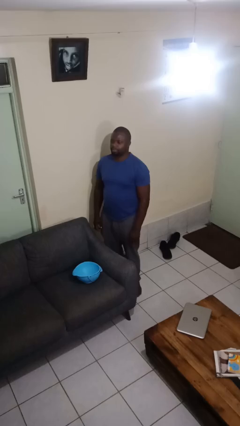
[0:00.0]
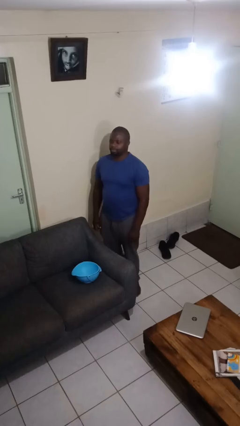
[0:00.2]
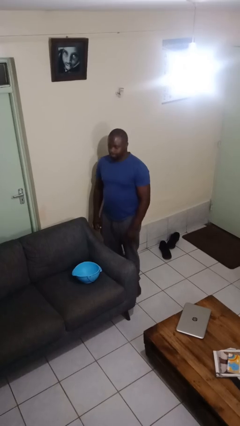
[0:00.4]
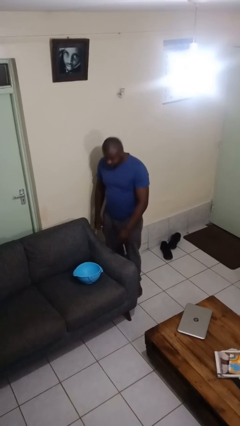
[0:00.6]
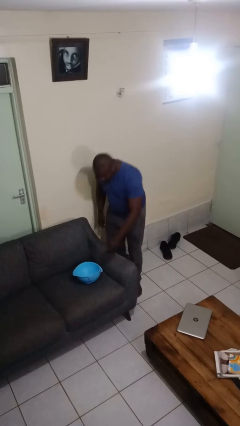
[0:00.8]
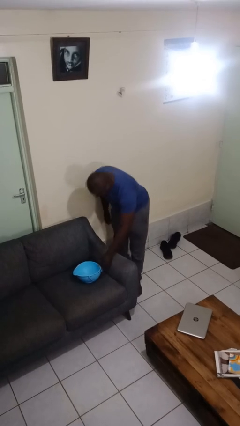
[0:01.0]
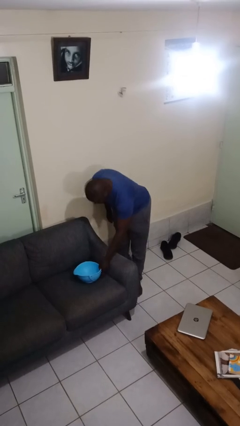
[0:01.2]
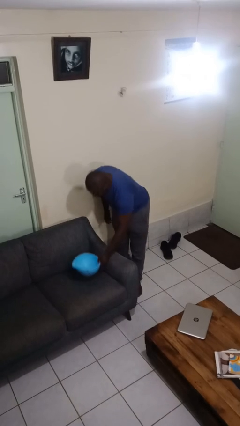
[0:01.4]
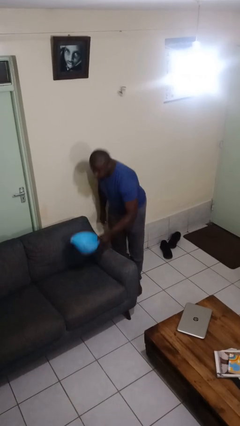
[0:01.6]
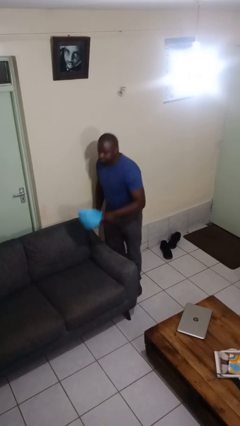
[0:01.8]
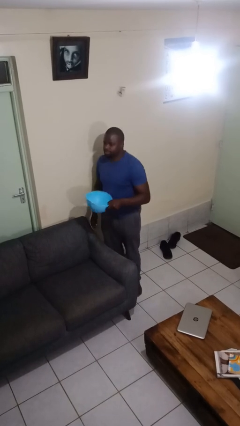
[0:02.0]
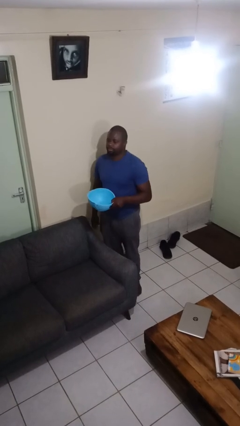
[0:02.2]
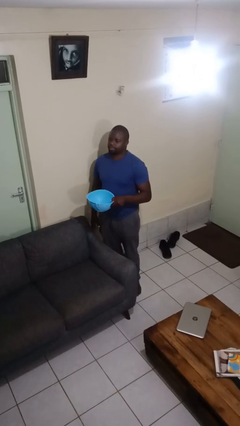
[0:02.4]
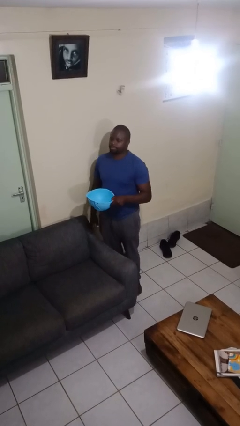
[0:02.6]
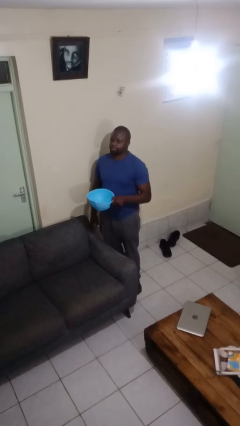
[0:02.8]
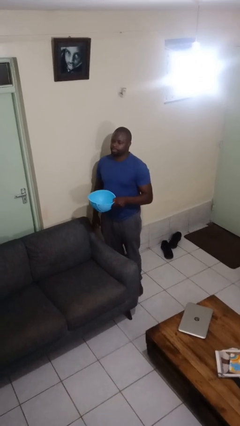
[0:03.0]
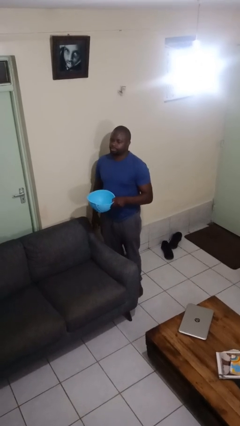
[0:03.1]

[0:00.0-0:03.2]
person picks up object from couch

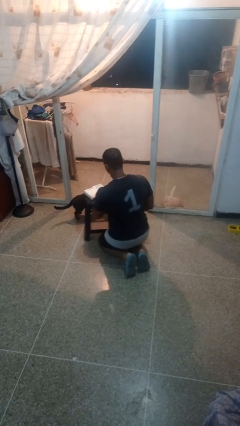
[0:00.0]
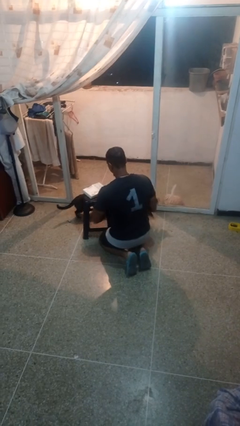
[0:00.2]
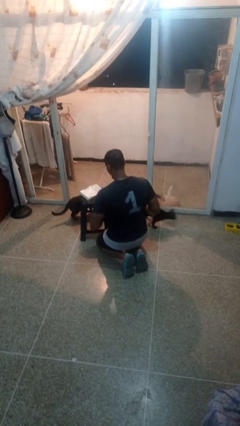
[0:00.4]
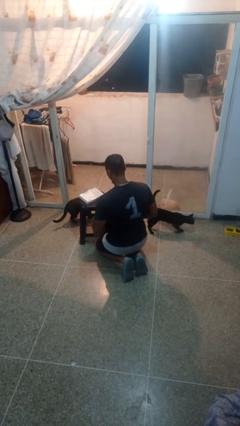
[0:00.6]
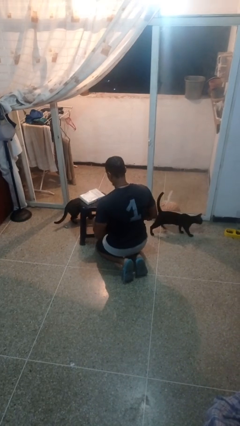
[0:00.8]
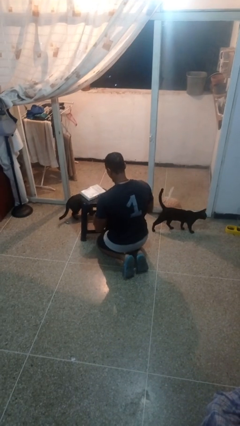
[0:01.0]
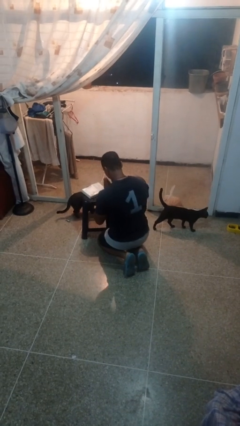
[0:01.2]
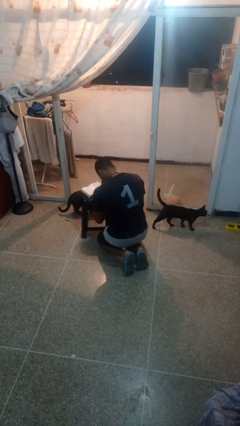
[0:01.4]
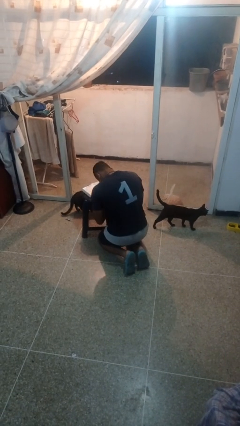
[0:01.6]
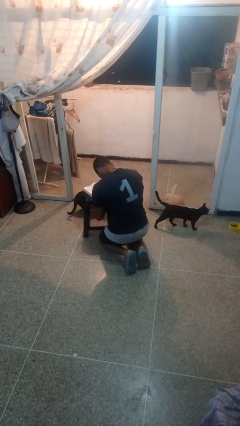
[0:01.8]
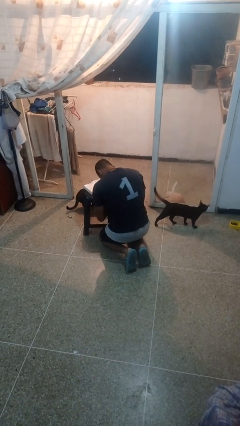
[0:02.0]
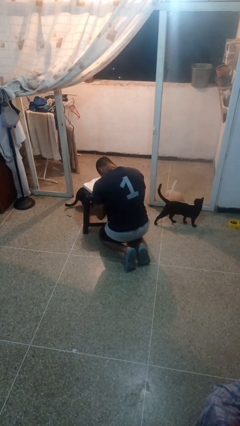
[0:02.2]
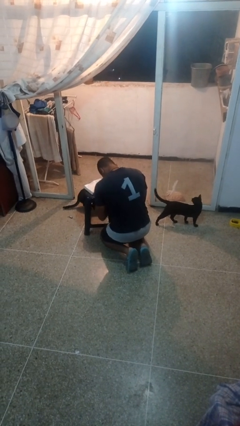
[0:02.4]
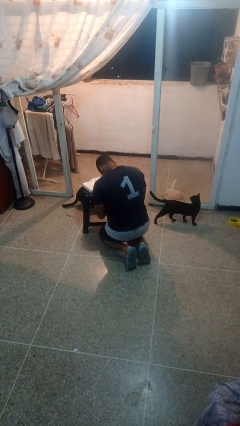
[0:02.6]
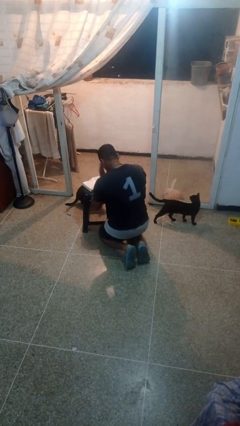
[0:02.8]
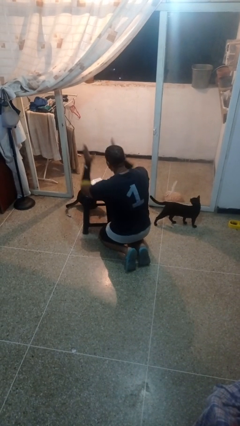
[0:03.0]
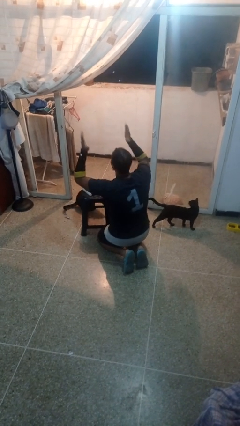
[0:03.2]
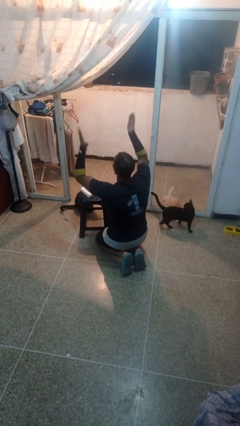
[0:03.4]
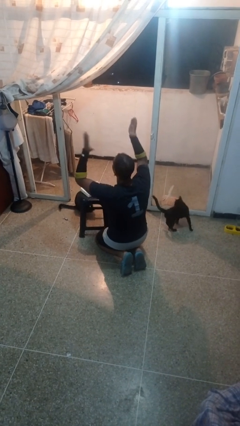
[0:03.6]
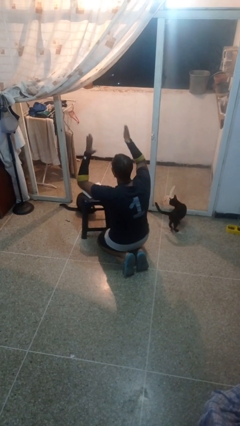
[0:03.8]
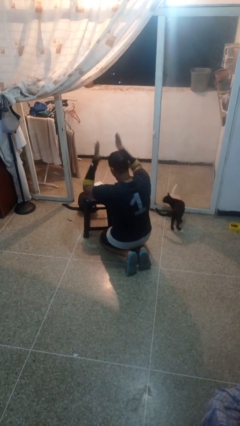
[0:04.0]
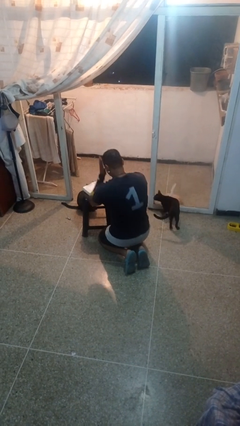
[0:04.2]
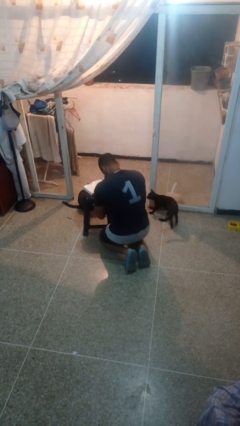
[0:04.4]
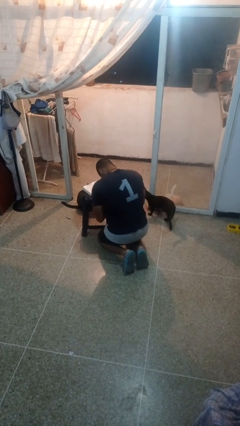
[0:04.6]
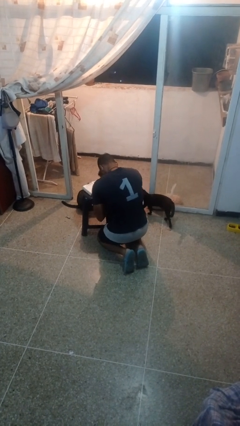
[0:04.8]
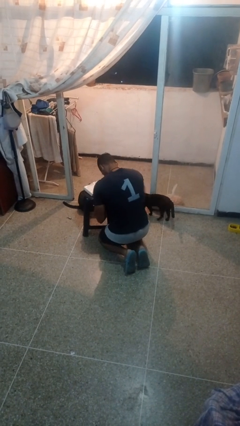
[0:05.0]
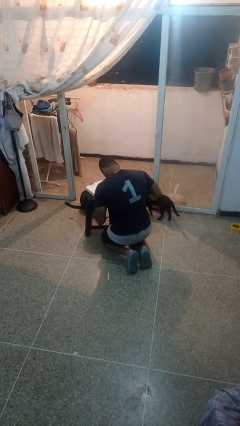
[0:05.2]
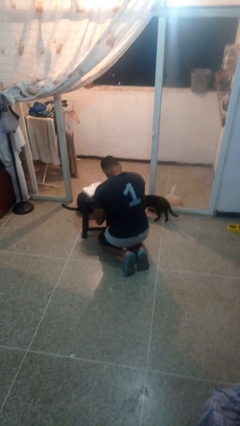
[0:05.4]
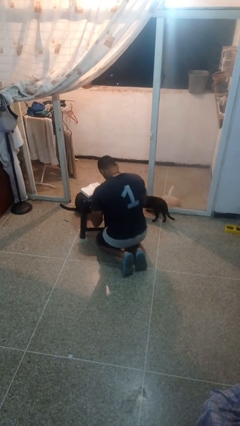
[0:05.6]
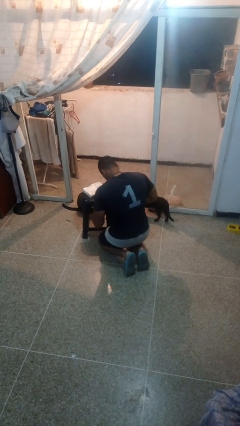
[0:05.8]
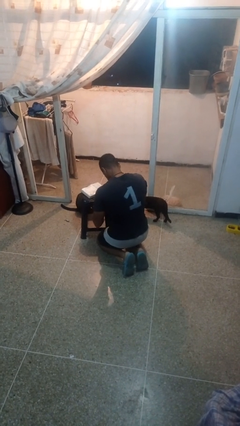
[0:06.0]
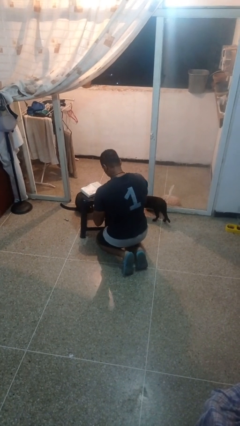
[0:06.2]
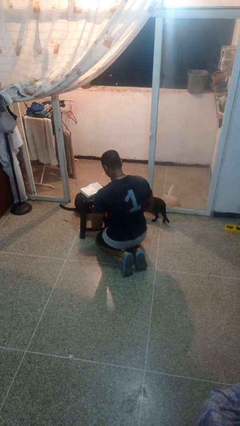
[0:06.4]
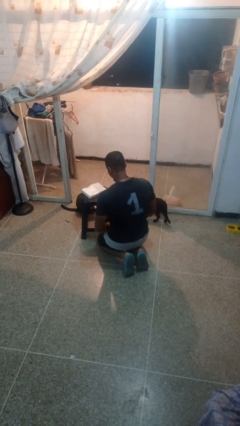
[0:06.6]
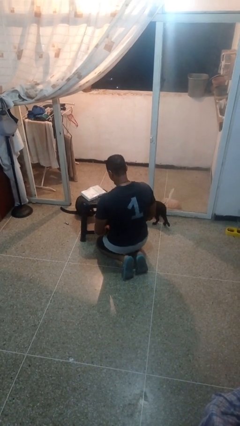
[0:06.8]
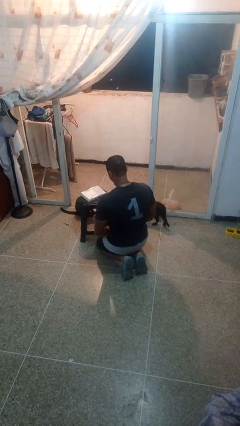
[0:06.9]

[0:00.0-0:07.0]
person prays

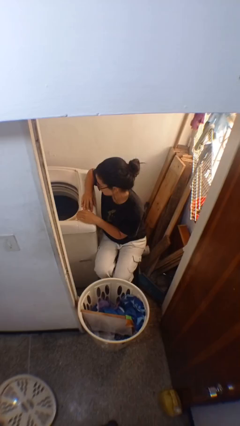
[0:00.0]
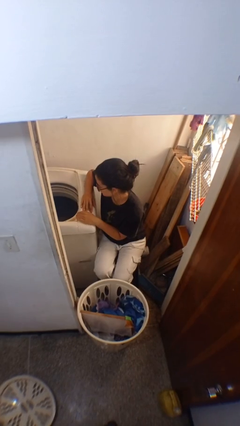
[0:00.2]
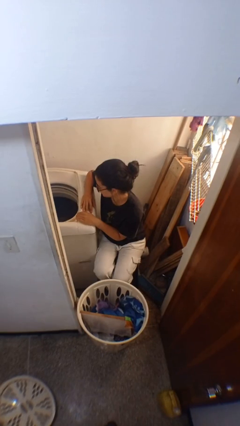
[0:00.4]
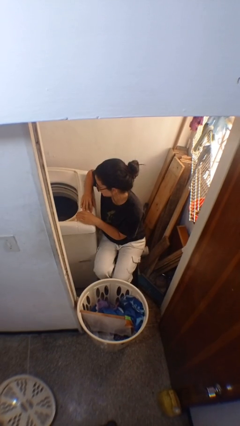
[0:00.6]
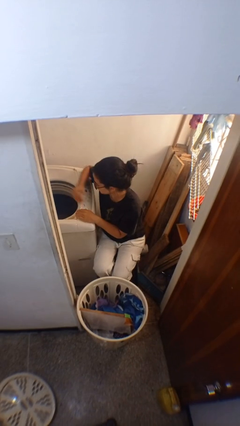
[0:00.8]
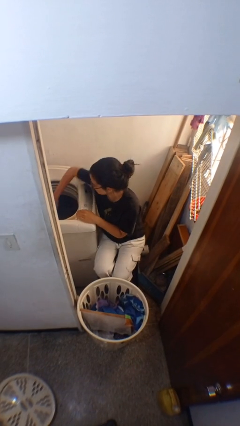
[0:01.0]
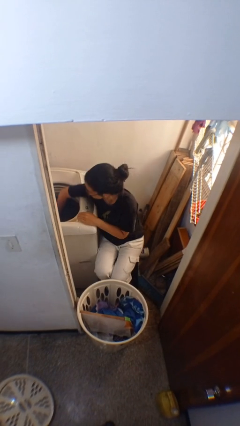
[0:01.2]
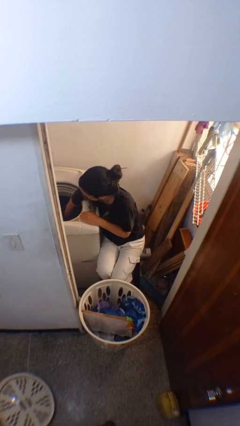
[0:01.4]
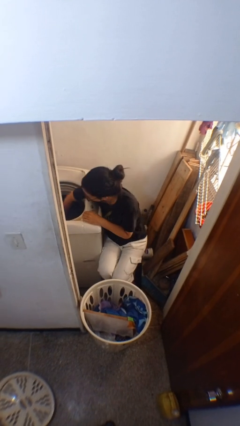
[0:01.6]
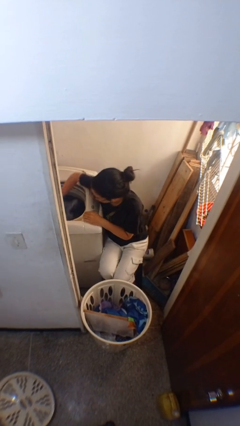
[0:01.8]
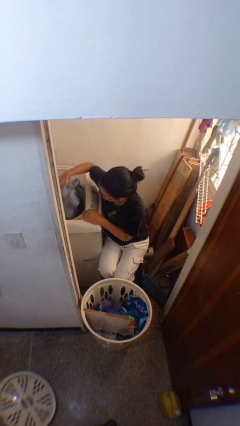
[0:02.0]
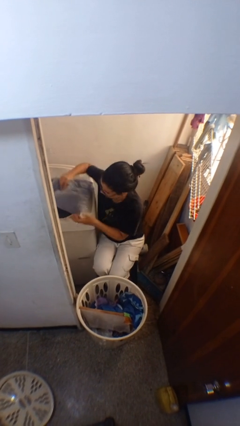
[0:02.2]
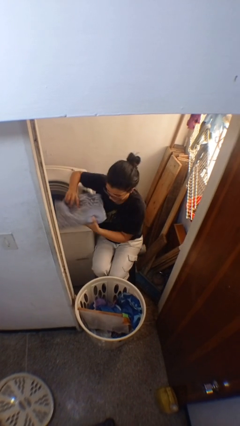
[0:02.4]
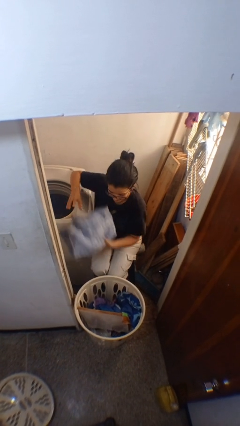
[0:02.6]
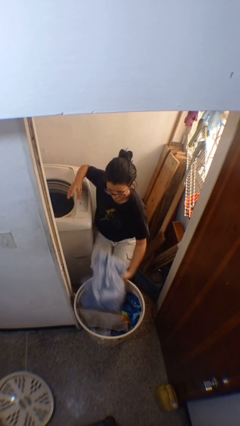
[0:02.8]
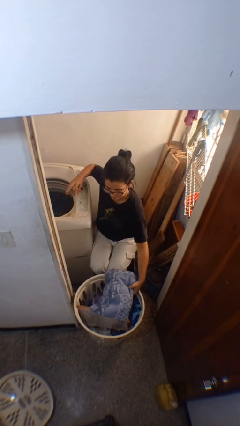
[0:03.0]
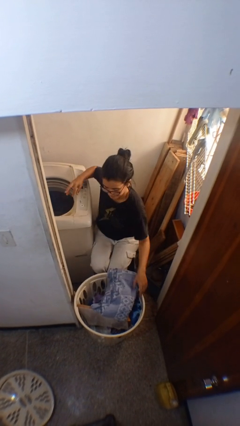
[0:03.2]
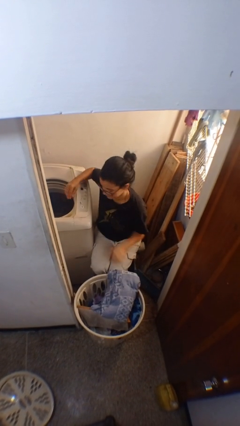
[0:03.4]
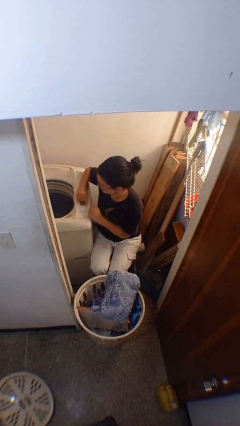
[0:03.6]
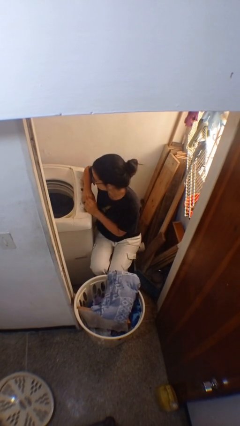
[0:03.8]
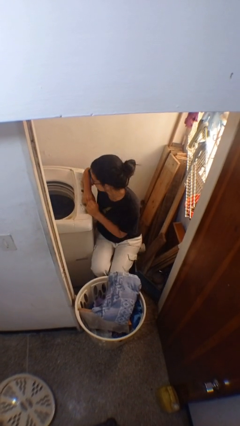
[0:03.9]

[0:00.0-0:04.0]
person unloads clotheswasher

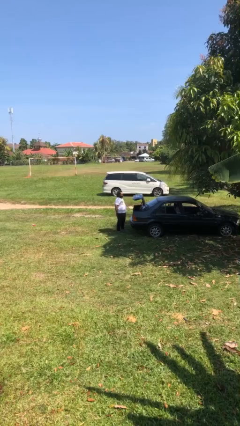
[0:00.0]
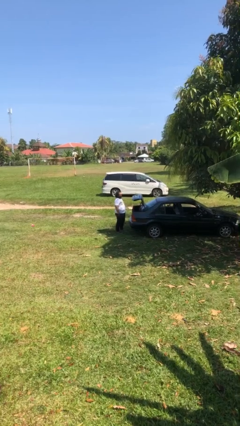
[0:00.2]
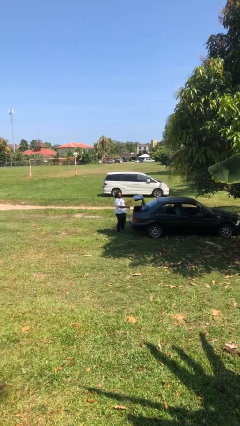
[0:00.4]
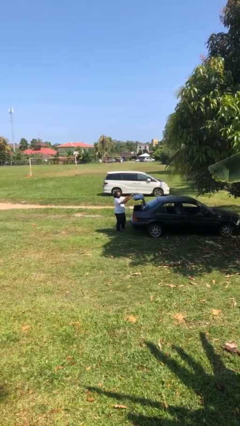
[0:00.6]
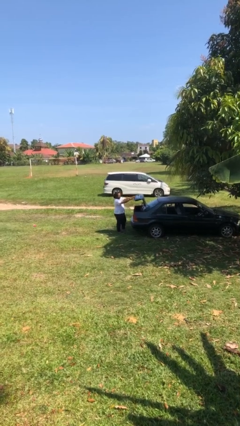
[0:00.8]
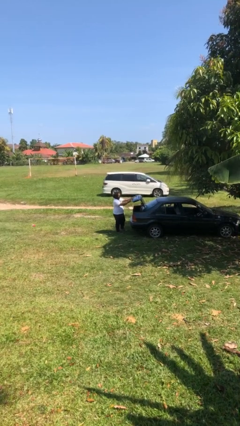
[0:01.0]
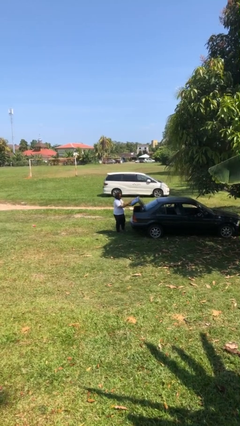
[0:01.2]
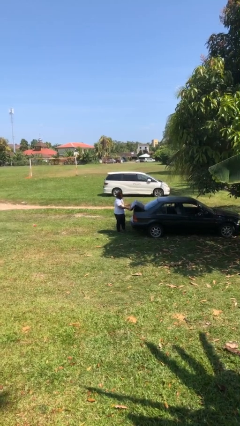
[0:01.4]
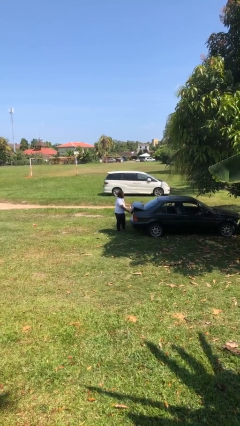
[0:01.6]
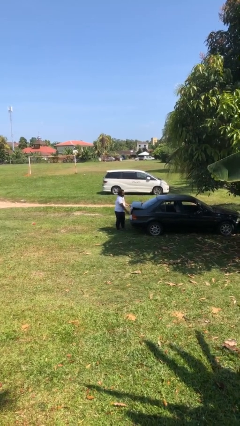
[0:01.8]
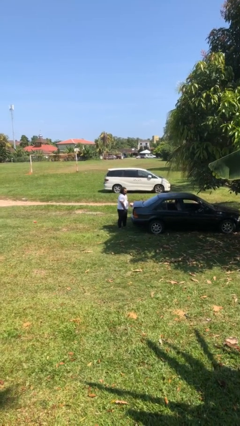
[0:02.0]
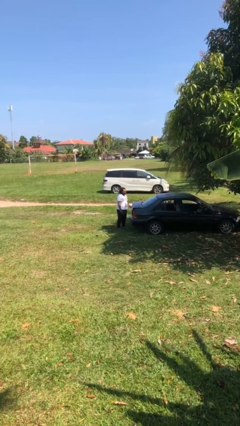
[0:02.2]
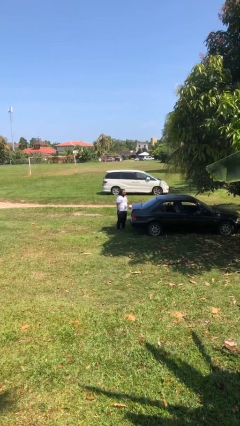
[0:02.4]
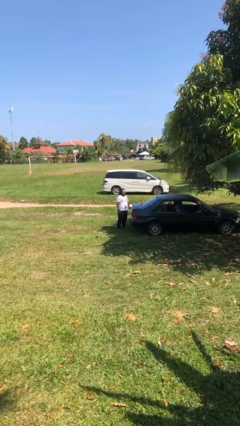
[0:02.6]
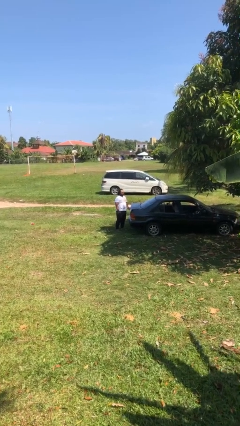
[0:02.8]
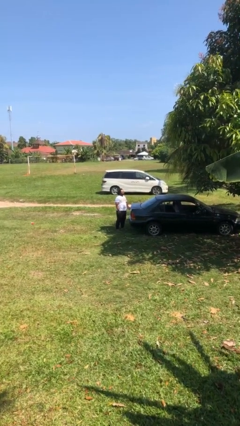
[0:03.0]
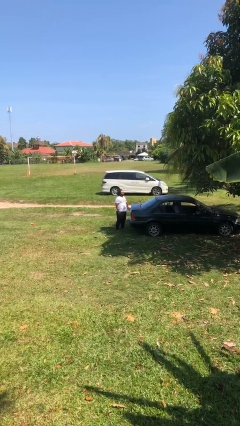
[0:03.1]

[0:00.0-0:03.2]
person closes car trunk
